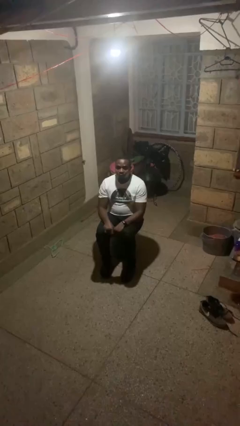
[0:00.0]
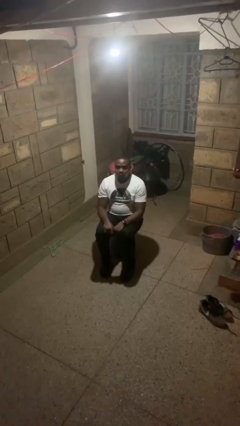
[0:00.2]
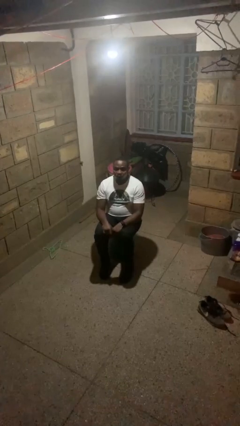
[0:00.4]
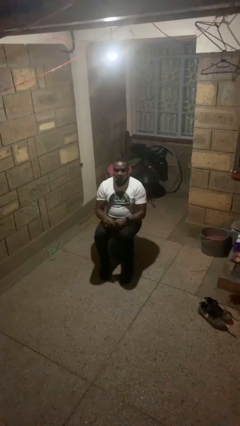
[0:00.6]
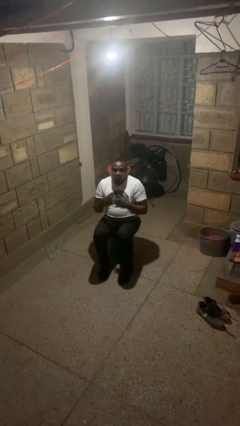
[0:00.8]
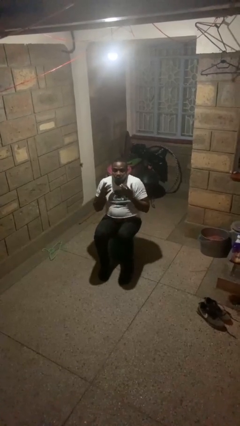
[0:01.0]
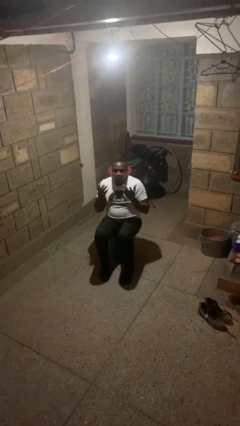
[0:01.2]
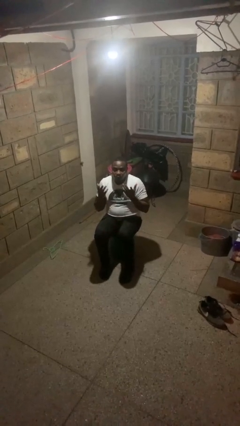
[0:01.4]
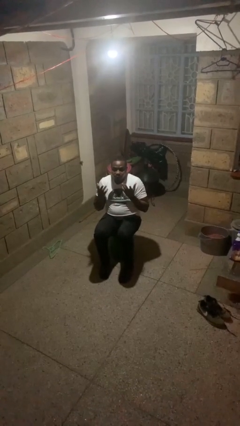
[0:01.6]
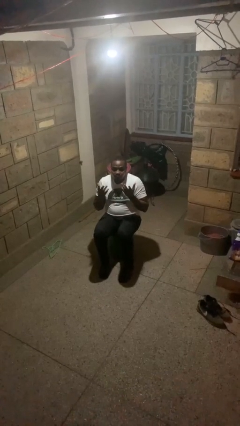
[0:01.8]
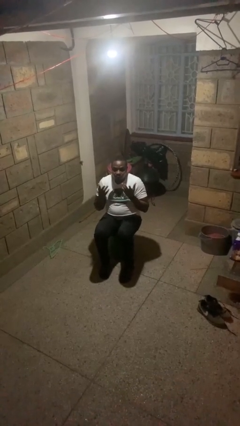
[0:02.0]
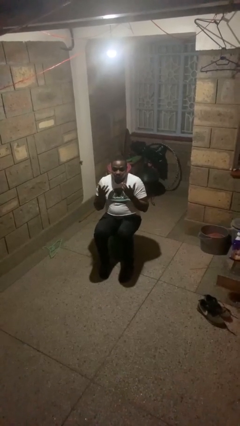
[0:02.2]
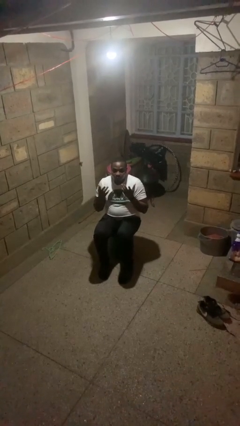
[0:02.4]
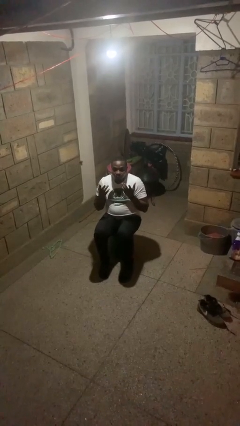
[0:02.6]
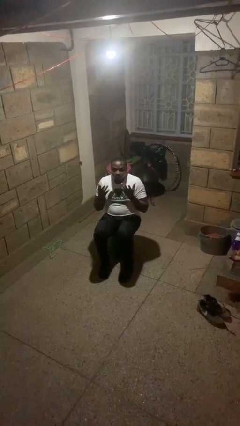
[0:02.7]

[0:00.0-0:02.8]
person shrugs

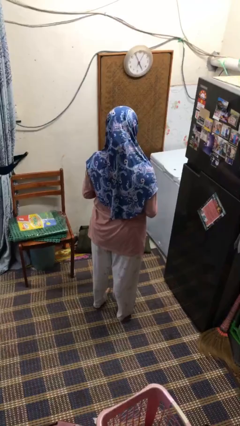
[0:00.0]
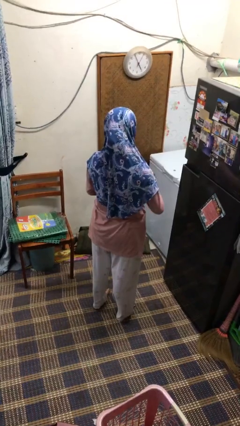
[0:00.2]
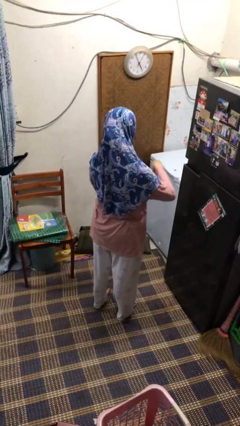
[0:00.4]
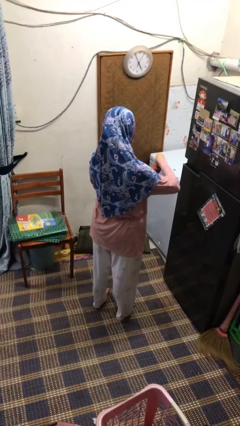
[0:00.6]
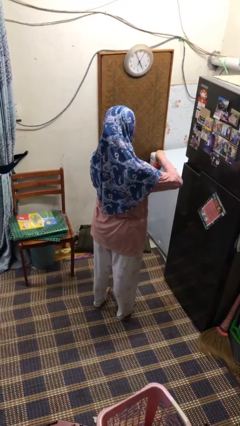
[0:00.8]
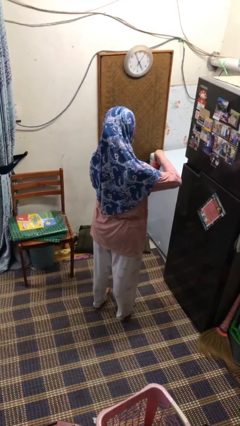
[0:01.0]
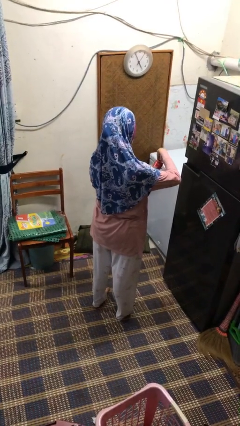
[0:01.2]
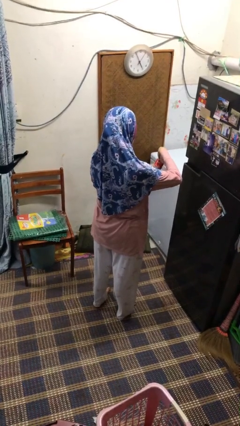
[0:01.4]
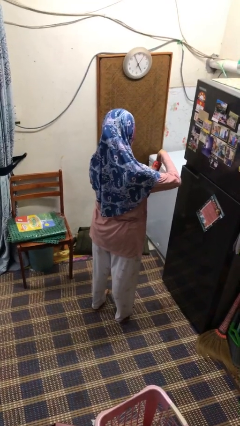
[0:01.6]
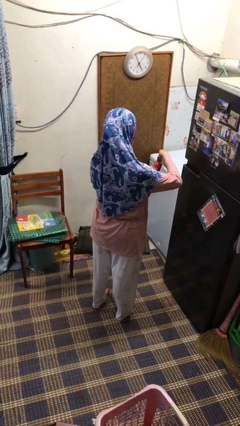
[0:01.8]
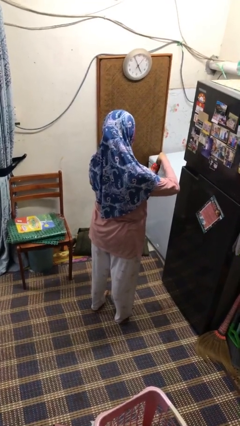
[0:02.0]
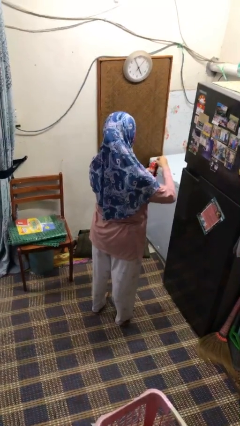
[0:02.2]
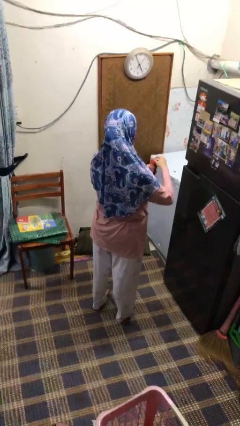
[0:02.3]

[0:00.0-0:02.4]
person opens beverage can

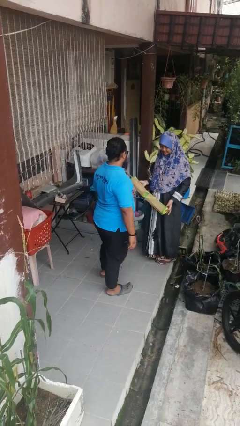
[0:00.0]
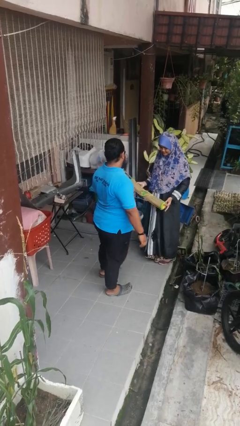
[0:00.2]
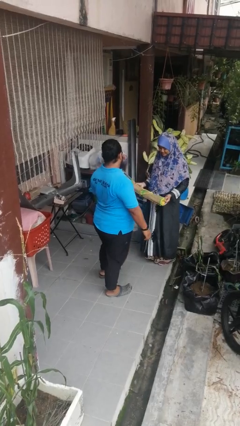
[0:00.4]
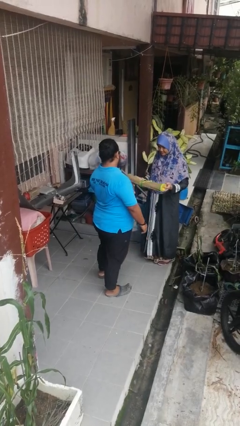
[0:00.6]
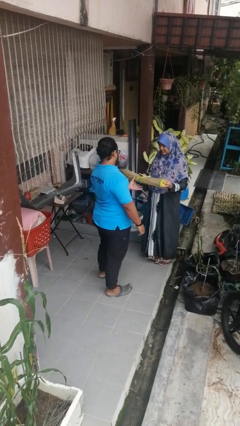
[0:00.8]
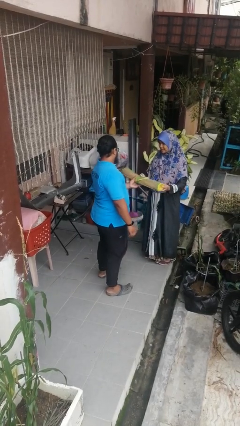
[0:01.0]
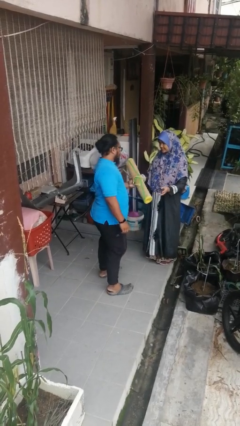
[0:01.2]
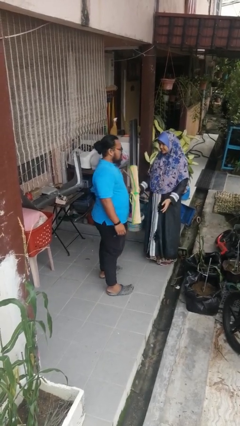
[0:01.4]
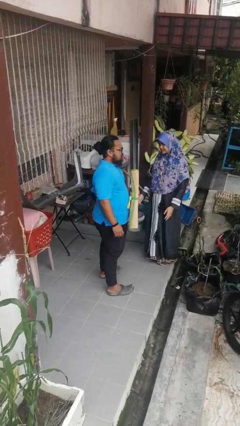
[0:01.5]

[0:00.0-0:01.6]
person transfers object to person

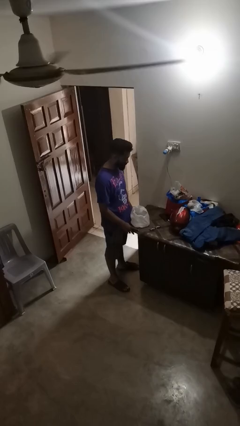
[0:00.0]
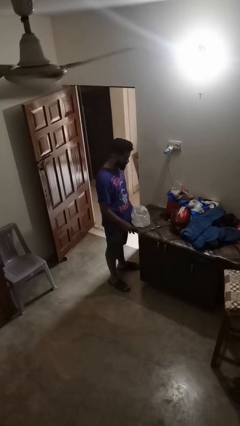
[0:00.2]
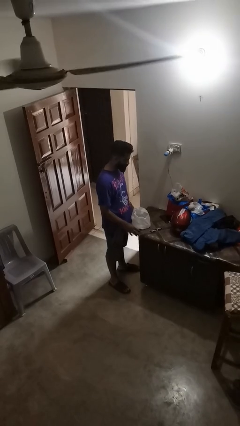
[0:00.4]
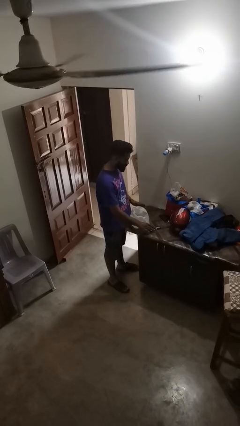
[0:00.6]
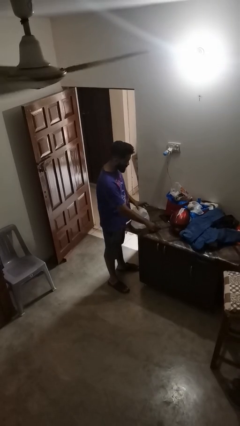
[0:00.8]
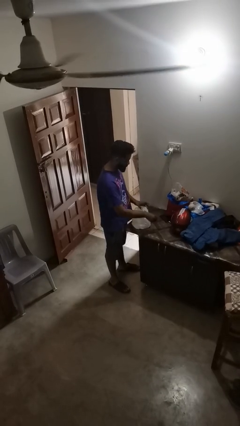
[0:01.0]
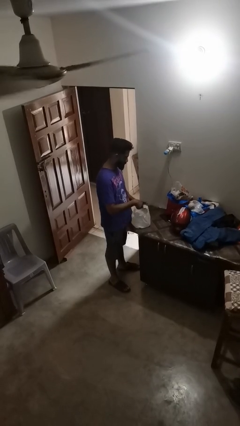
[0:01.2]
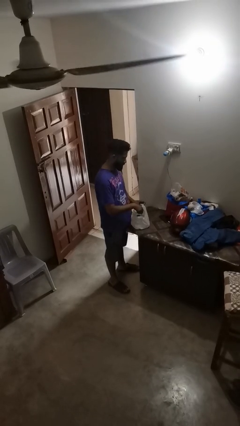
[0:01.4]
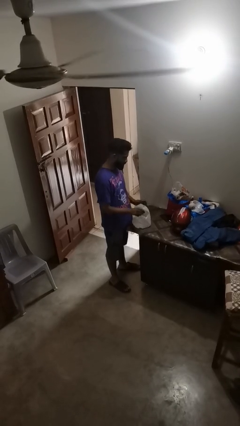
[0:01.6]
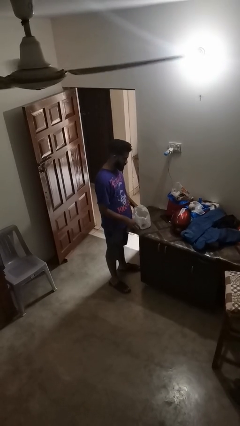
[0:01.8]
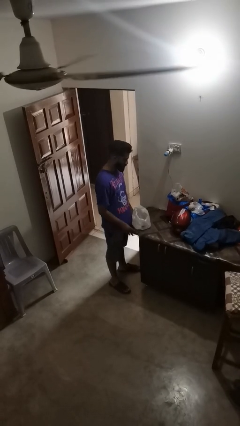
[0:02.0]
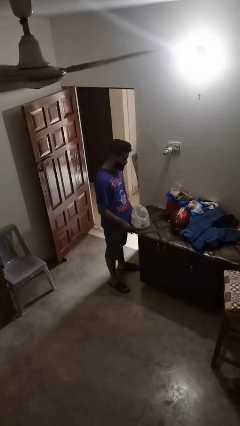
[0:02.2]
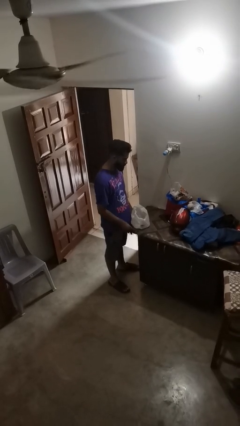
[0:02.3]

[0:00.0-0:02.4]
person puts object into bag

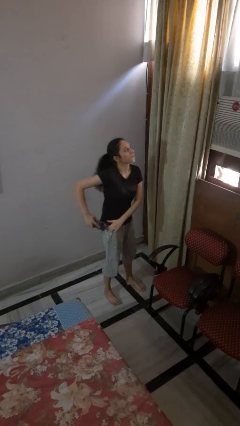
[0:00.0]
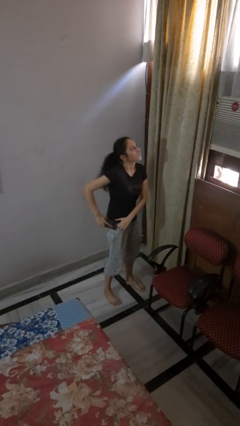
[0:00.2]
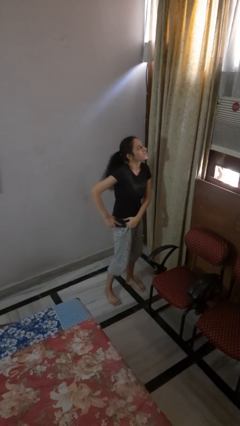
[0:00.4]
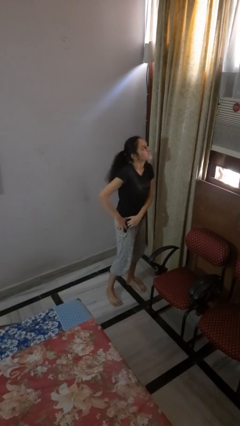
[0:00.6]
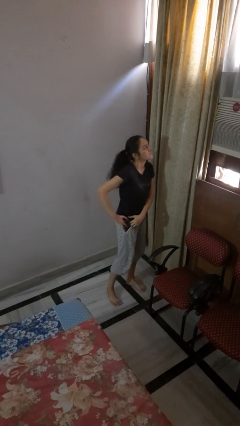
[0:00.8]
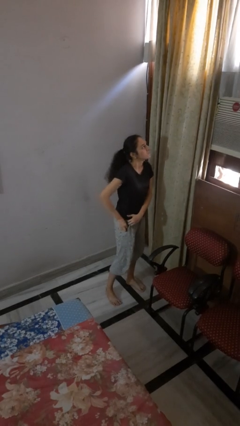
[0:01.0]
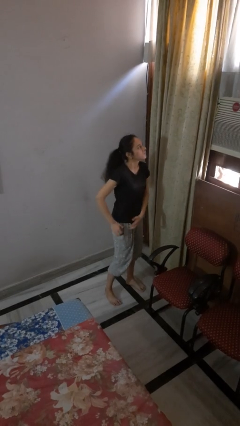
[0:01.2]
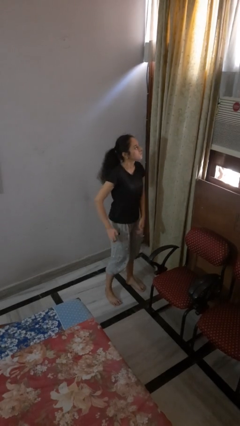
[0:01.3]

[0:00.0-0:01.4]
person puts phone into pocket

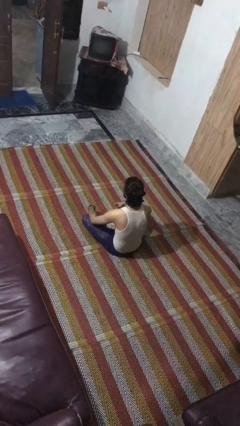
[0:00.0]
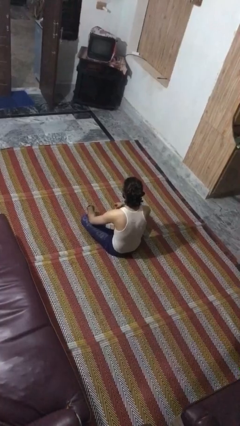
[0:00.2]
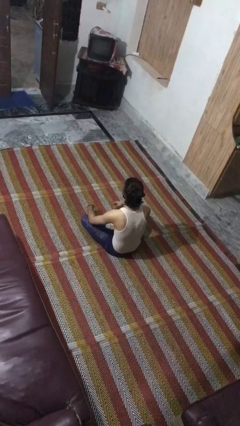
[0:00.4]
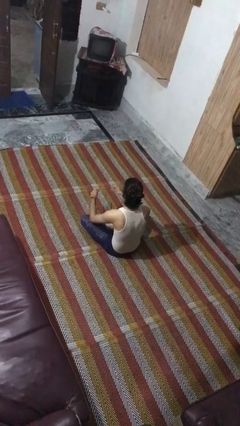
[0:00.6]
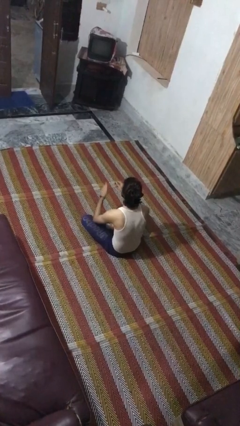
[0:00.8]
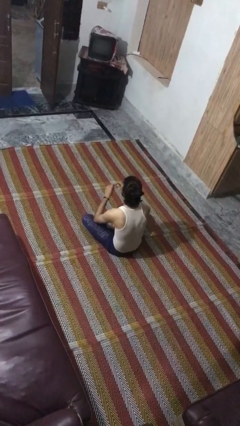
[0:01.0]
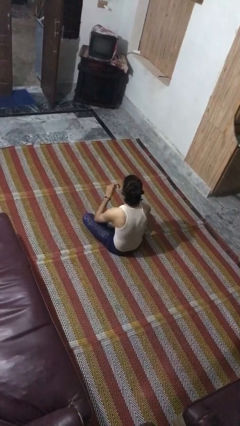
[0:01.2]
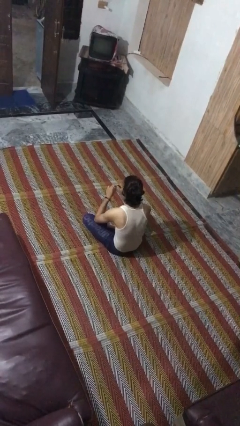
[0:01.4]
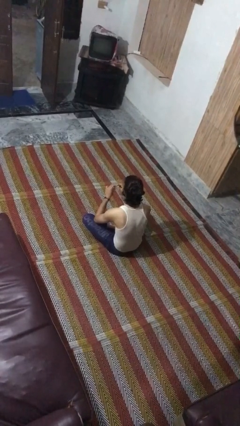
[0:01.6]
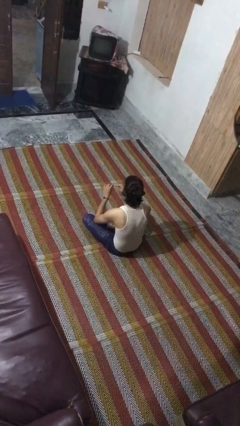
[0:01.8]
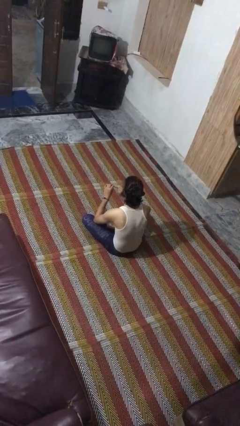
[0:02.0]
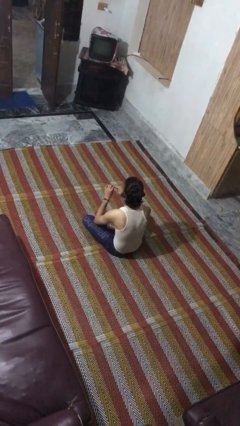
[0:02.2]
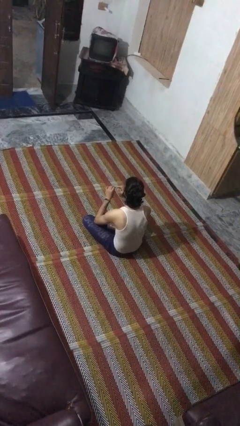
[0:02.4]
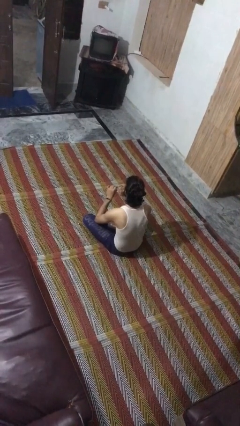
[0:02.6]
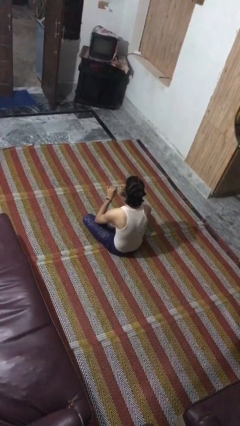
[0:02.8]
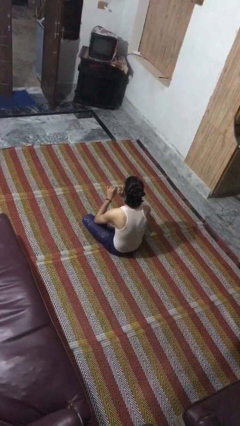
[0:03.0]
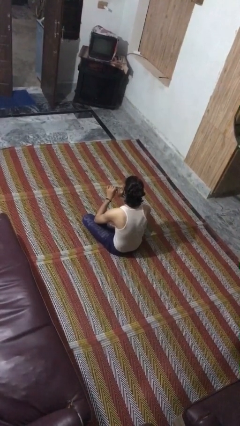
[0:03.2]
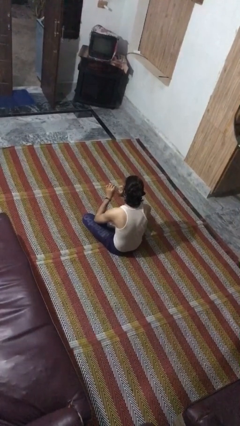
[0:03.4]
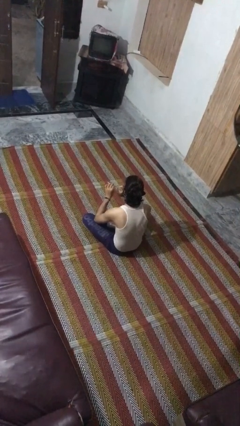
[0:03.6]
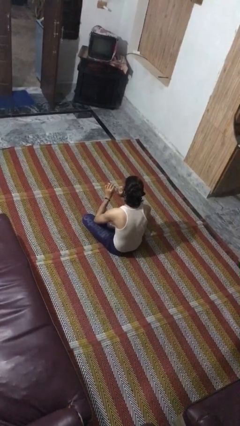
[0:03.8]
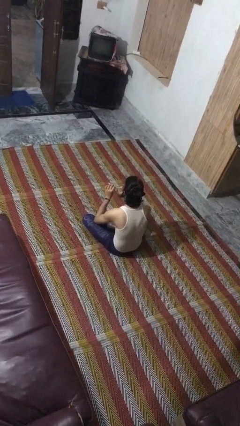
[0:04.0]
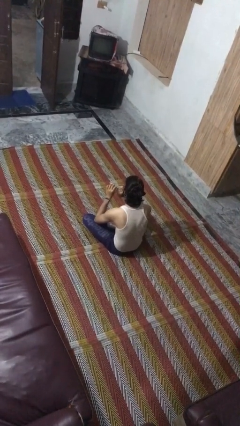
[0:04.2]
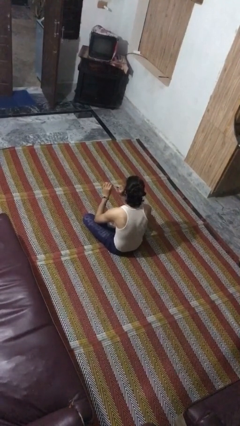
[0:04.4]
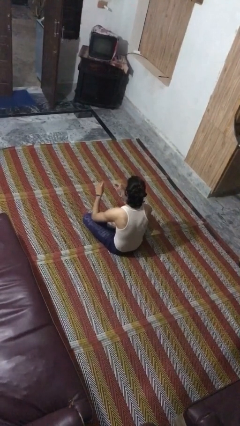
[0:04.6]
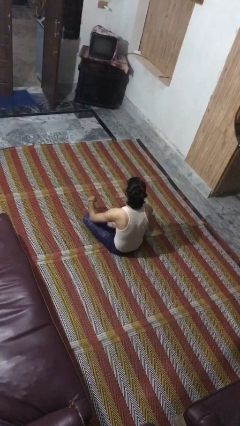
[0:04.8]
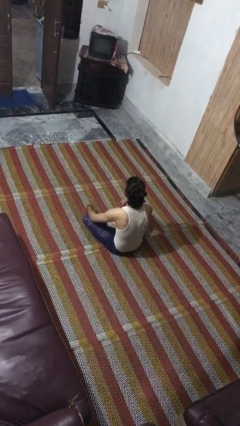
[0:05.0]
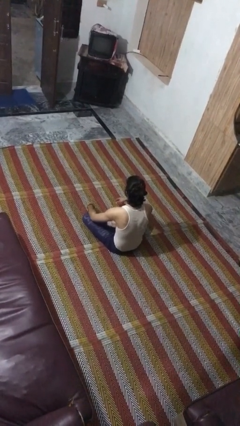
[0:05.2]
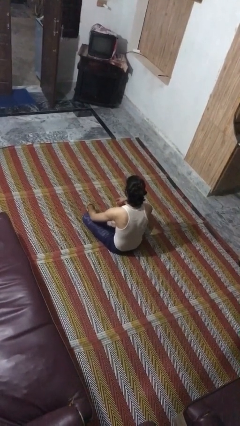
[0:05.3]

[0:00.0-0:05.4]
person files fingernails

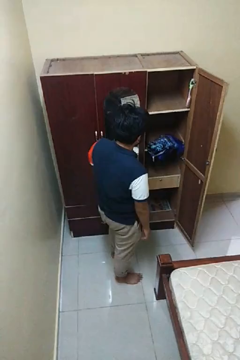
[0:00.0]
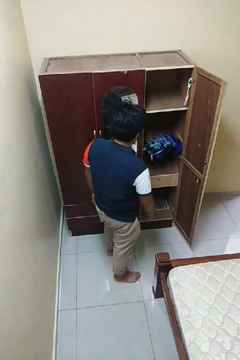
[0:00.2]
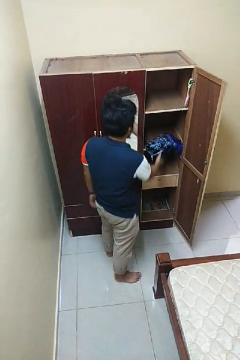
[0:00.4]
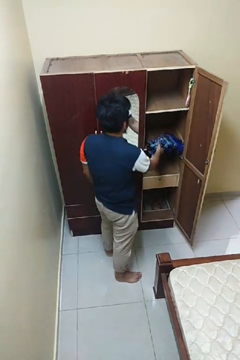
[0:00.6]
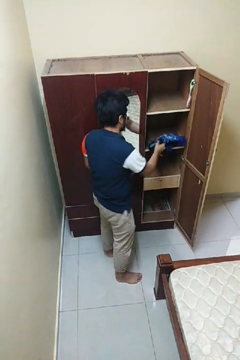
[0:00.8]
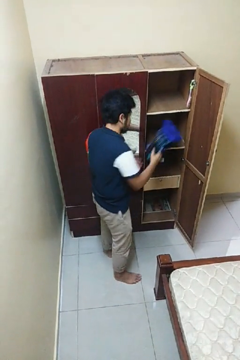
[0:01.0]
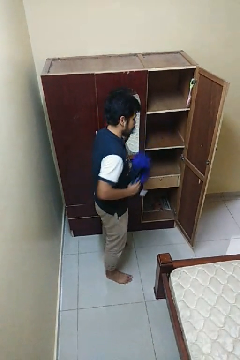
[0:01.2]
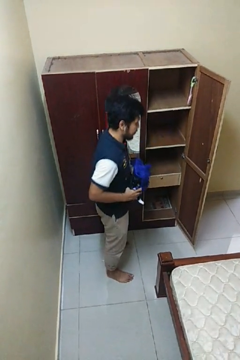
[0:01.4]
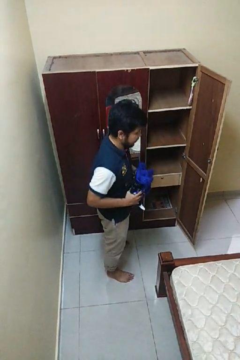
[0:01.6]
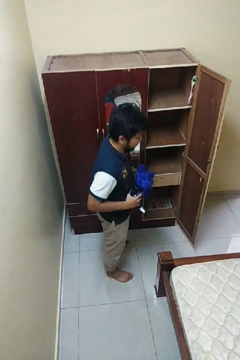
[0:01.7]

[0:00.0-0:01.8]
person picks up object from cabinet
